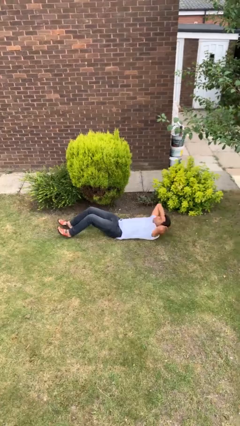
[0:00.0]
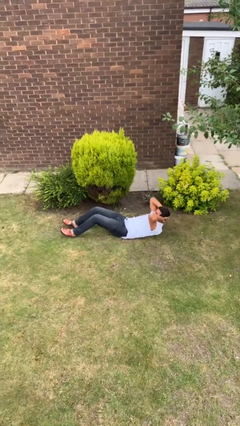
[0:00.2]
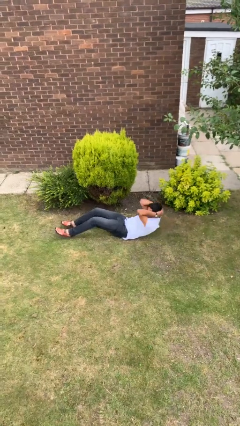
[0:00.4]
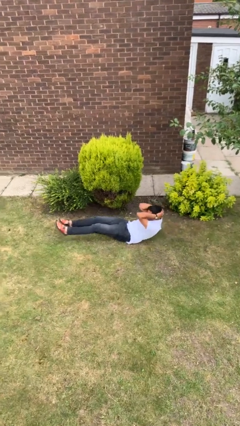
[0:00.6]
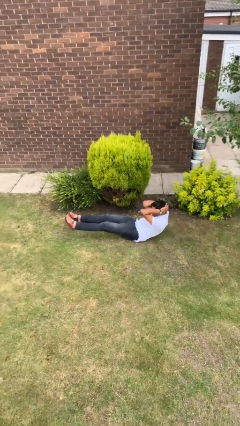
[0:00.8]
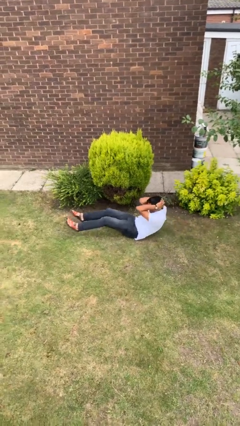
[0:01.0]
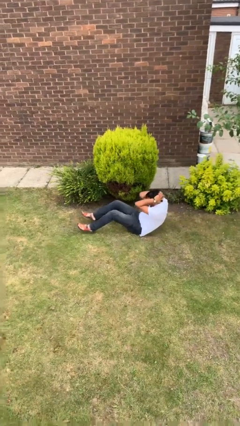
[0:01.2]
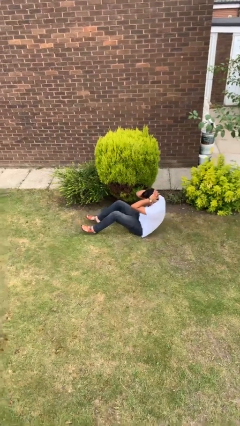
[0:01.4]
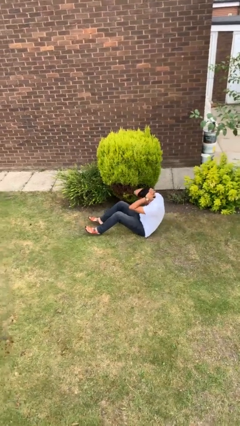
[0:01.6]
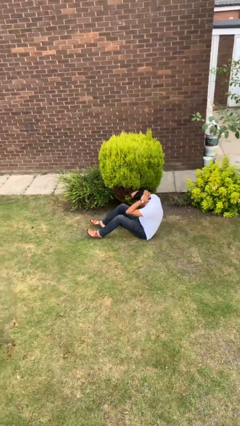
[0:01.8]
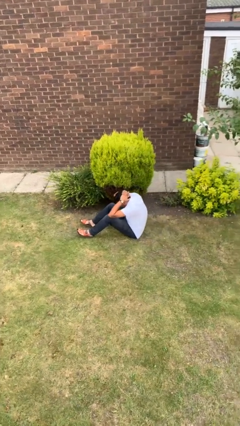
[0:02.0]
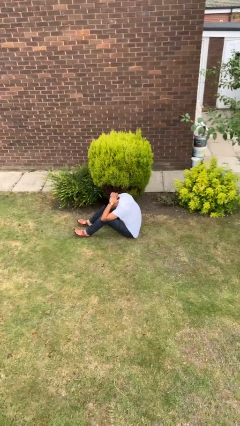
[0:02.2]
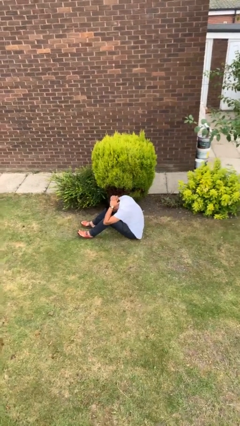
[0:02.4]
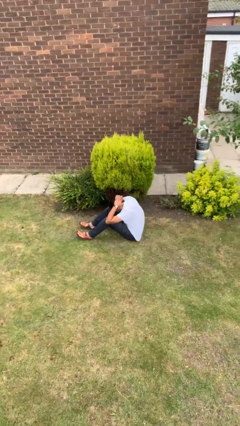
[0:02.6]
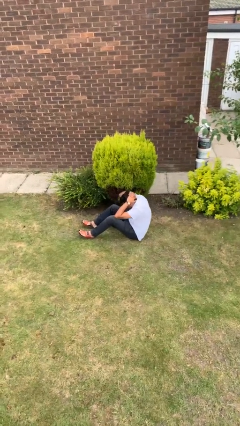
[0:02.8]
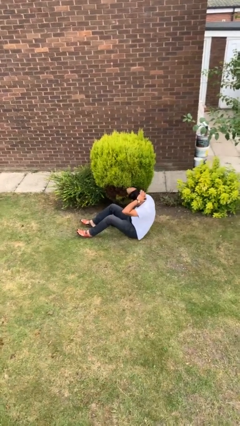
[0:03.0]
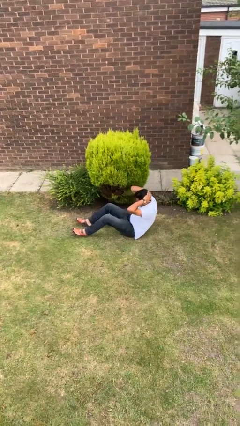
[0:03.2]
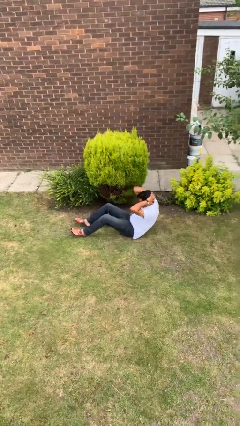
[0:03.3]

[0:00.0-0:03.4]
person exercises with situp

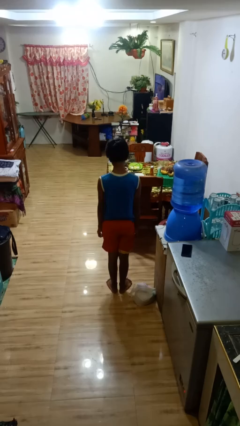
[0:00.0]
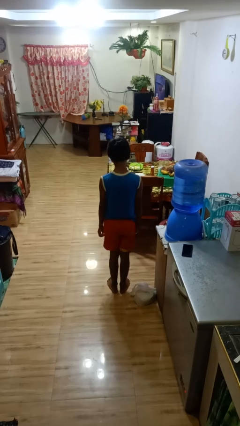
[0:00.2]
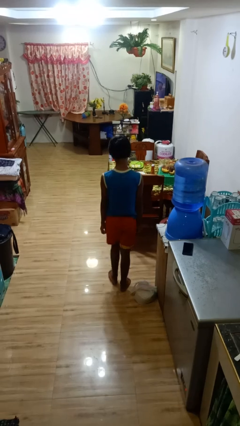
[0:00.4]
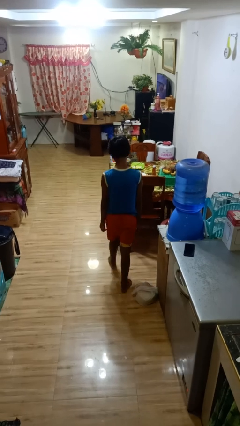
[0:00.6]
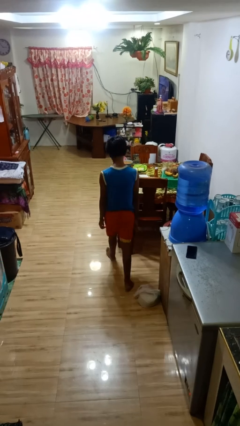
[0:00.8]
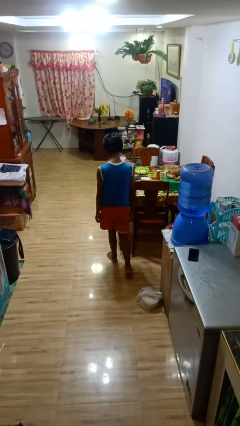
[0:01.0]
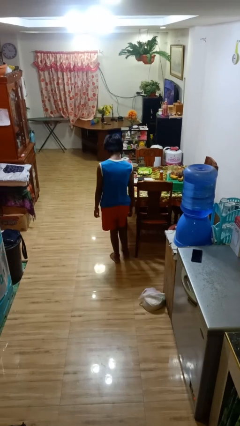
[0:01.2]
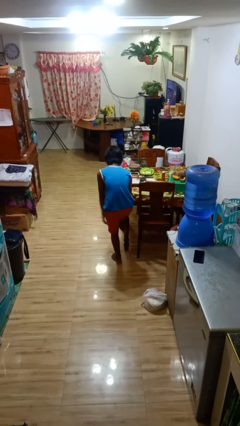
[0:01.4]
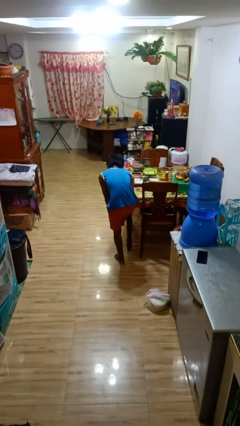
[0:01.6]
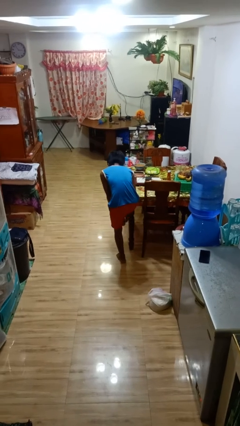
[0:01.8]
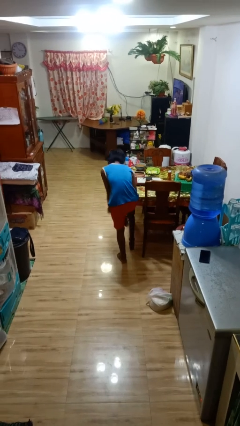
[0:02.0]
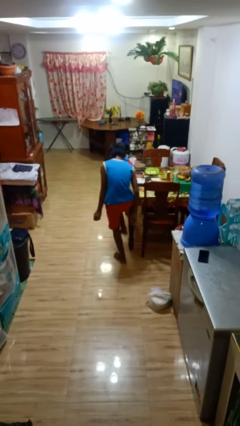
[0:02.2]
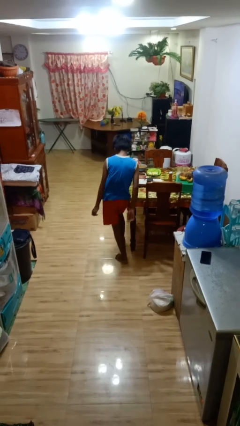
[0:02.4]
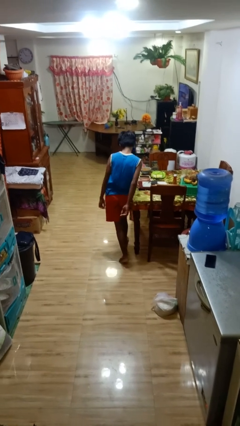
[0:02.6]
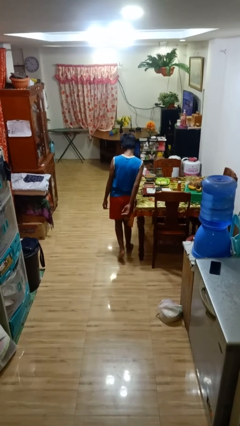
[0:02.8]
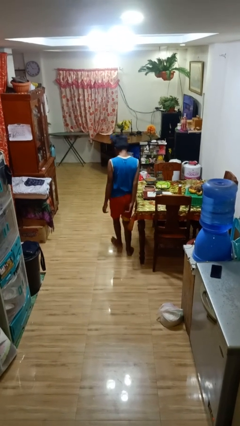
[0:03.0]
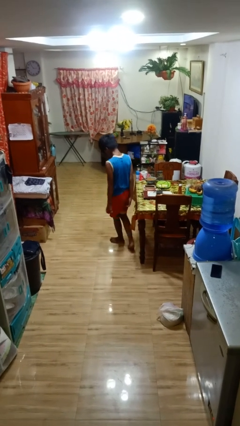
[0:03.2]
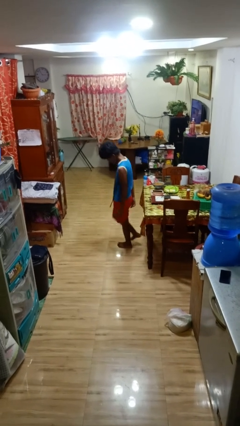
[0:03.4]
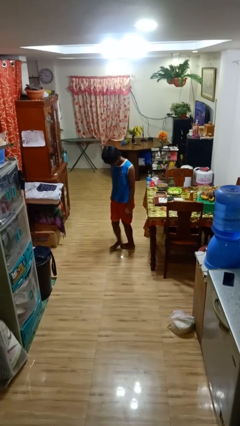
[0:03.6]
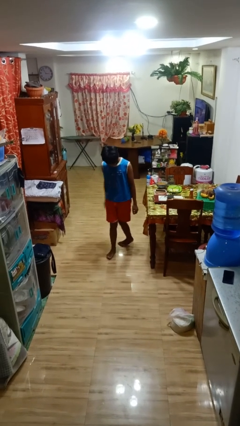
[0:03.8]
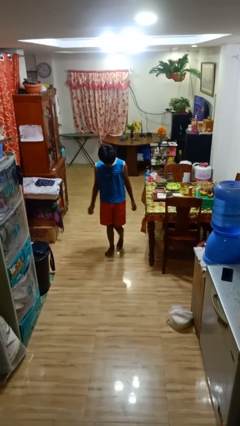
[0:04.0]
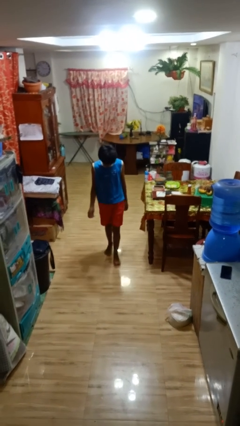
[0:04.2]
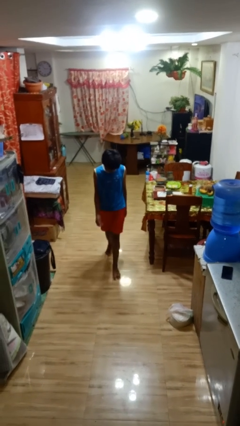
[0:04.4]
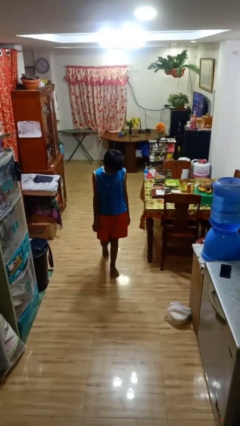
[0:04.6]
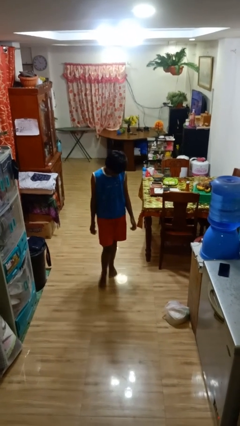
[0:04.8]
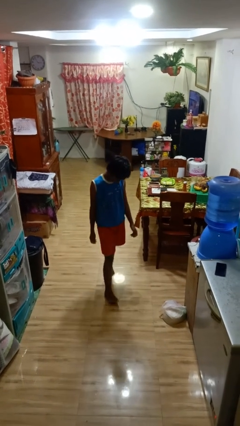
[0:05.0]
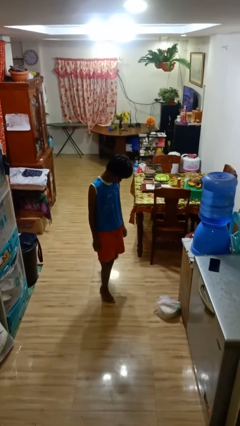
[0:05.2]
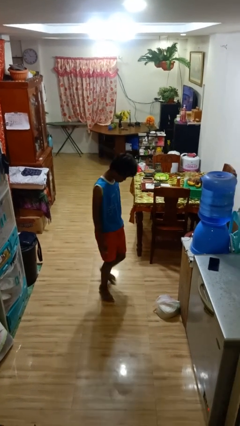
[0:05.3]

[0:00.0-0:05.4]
person bumps into table

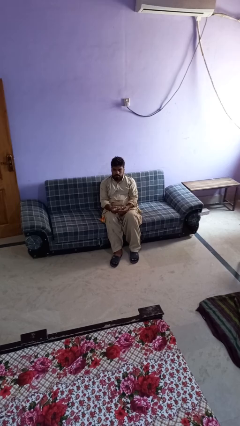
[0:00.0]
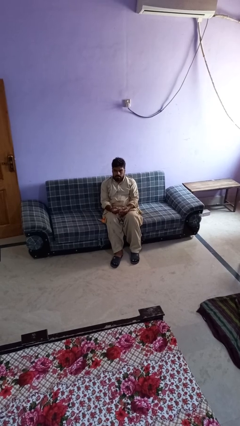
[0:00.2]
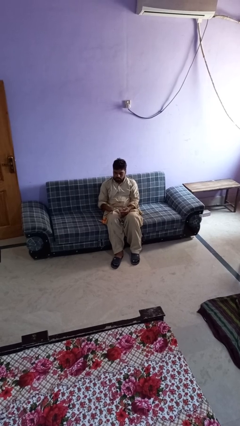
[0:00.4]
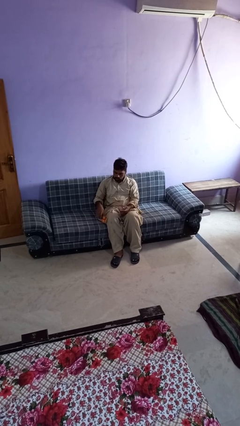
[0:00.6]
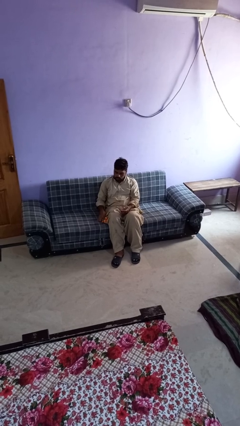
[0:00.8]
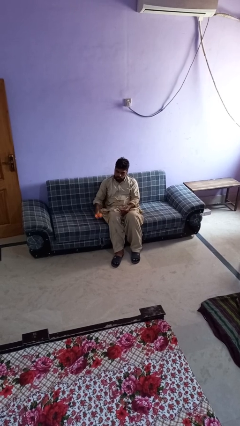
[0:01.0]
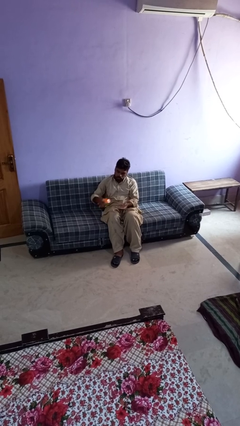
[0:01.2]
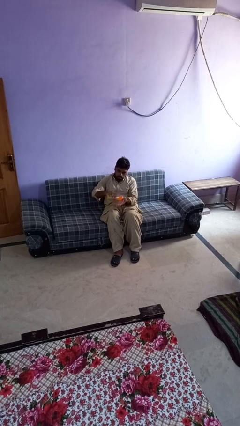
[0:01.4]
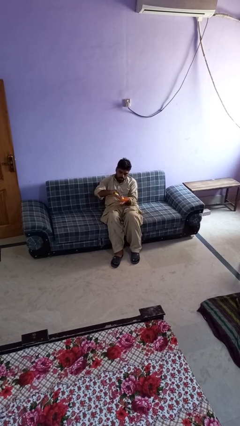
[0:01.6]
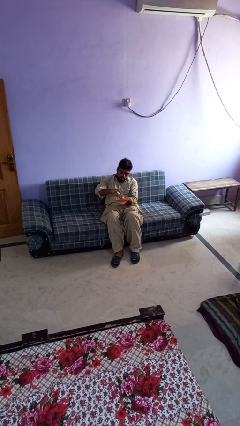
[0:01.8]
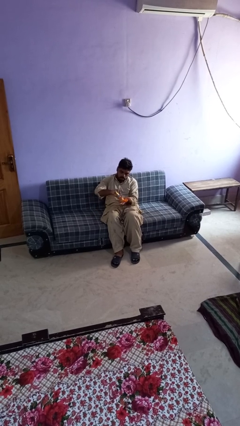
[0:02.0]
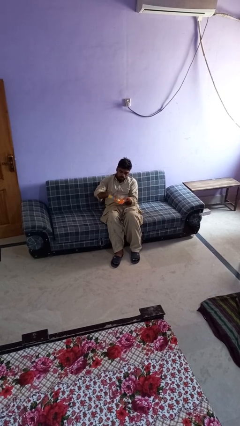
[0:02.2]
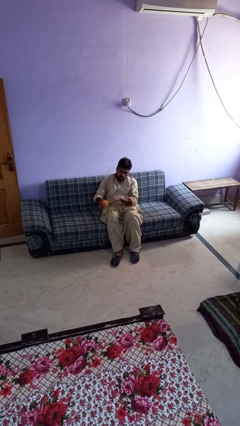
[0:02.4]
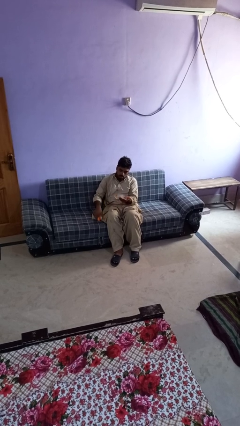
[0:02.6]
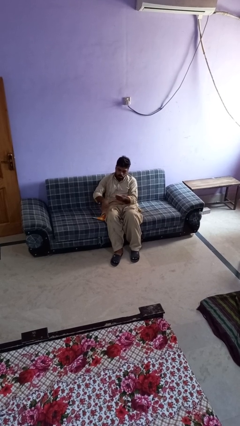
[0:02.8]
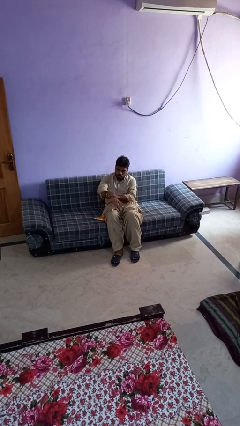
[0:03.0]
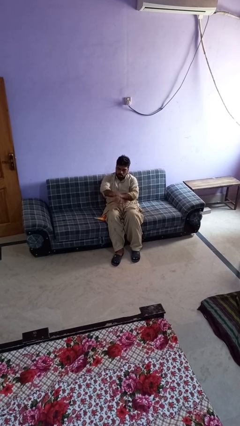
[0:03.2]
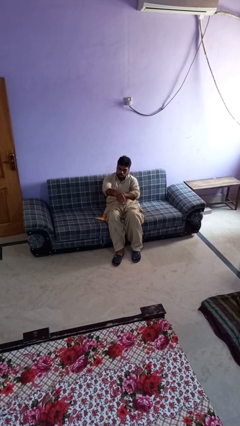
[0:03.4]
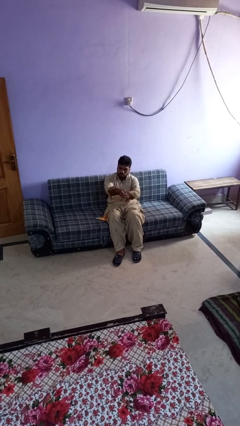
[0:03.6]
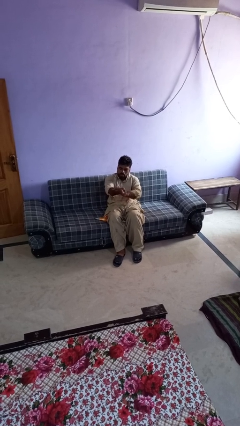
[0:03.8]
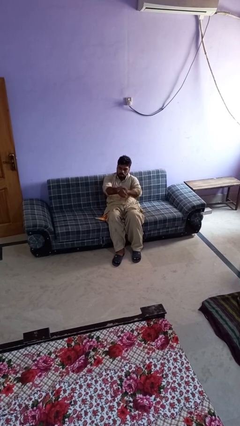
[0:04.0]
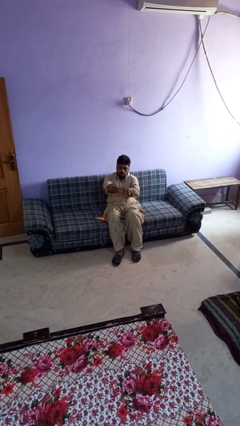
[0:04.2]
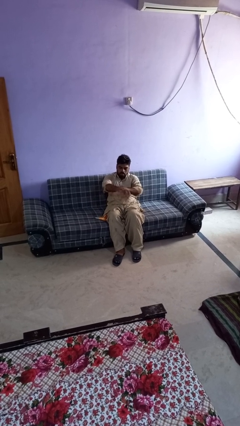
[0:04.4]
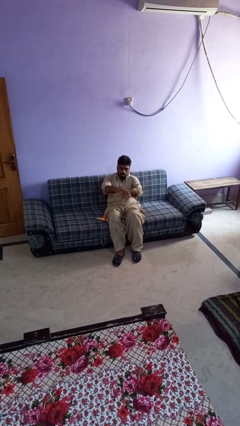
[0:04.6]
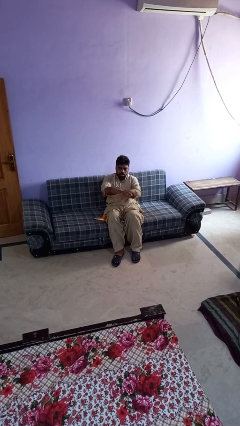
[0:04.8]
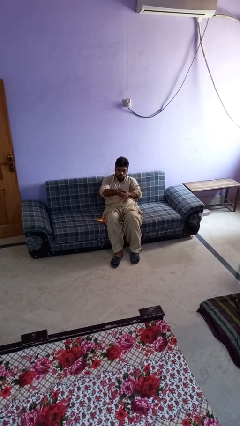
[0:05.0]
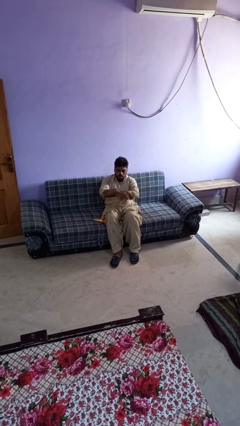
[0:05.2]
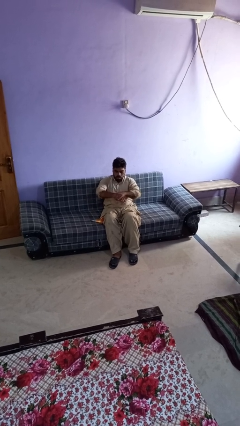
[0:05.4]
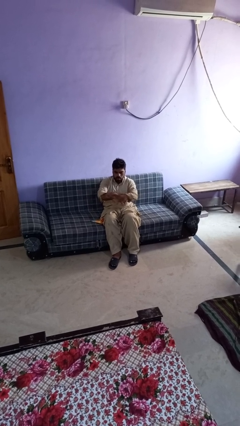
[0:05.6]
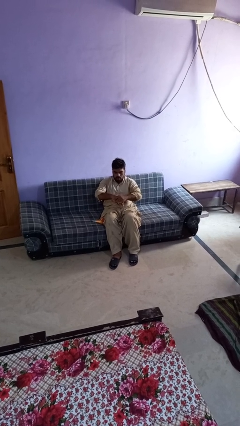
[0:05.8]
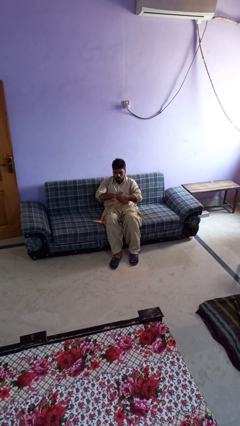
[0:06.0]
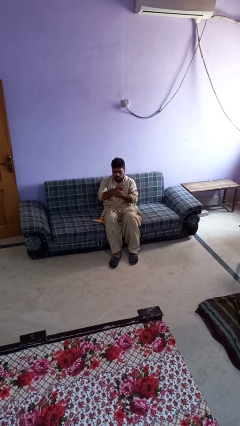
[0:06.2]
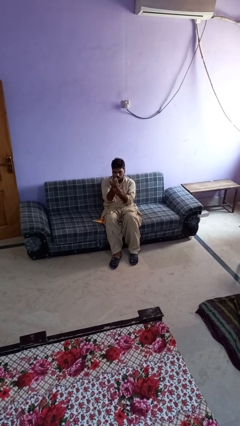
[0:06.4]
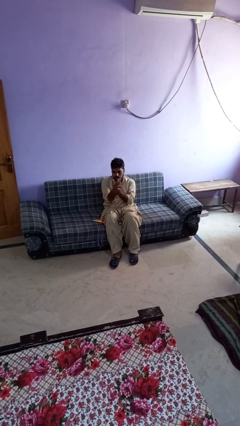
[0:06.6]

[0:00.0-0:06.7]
person applies sunscreen

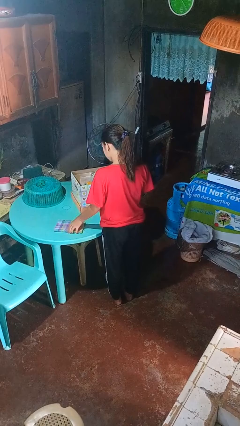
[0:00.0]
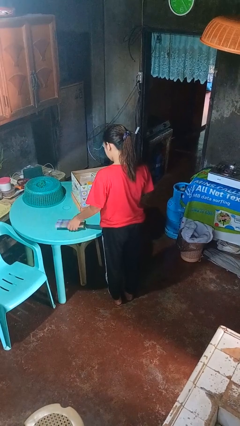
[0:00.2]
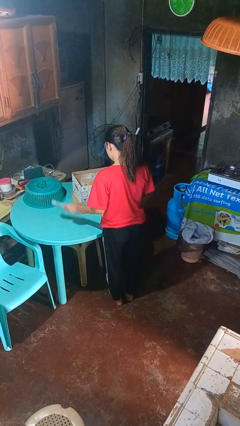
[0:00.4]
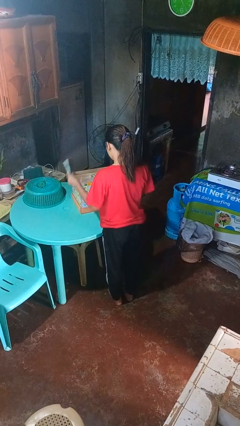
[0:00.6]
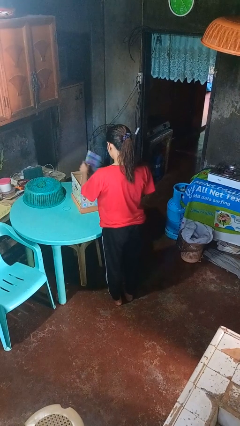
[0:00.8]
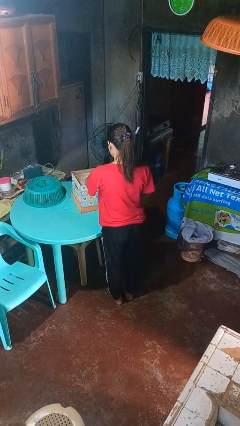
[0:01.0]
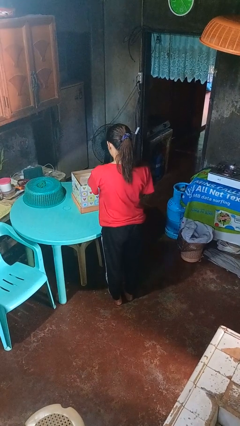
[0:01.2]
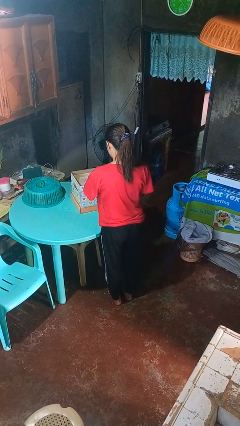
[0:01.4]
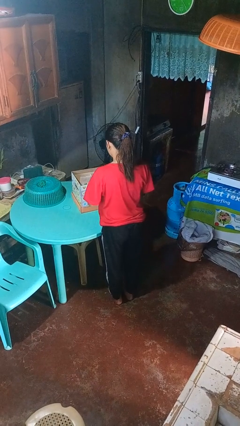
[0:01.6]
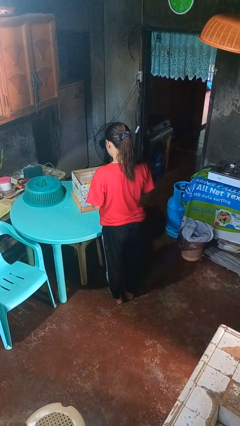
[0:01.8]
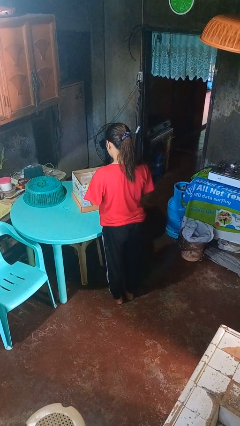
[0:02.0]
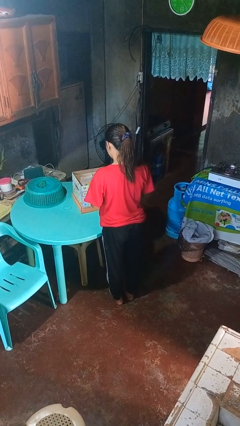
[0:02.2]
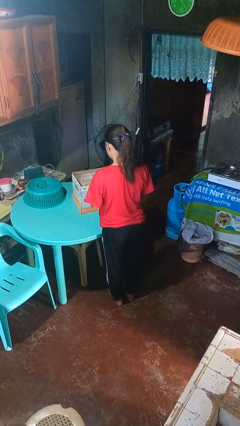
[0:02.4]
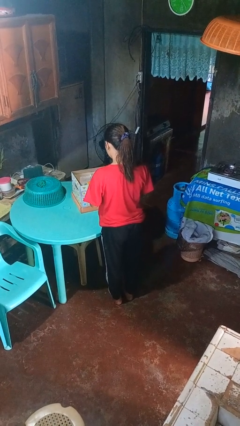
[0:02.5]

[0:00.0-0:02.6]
person puts object into box
